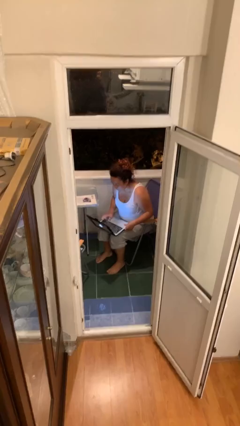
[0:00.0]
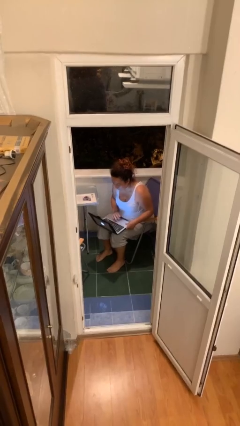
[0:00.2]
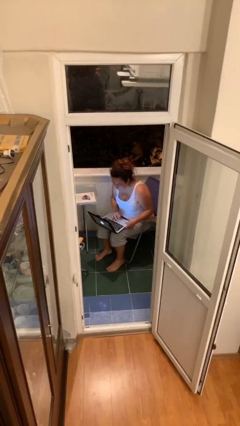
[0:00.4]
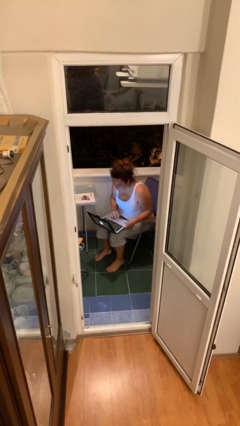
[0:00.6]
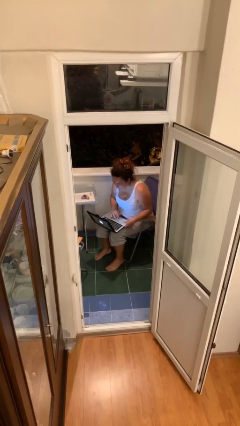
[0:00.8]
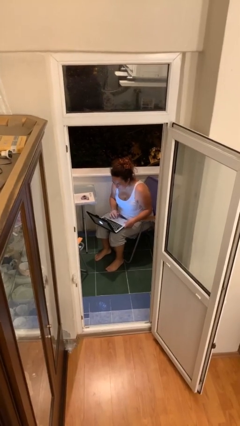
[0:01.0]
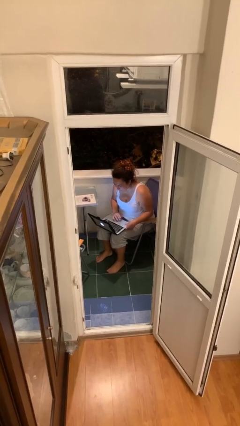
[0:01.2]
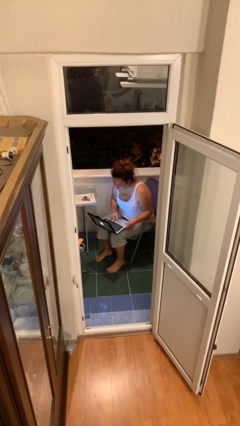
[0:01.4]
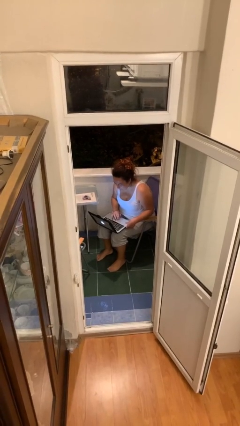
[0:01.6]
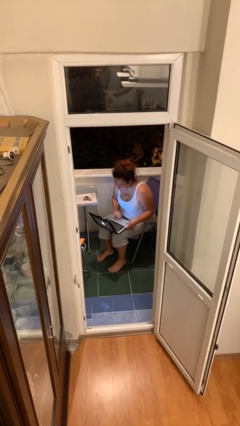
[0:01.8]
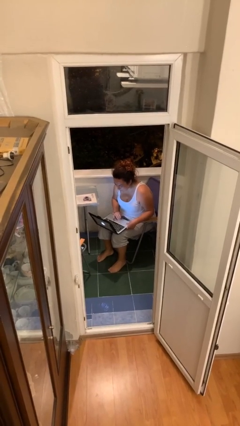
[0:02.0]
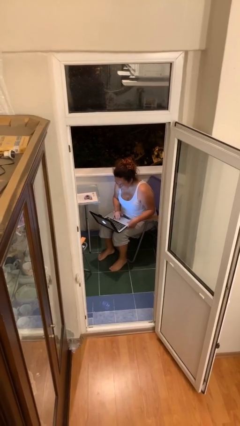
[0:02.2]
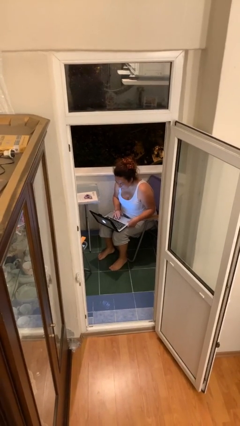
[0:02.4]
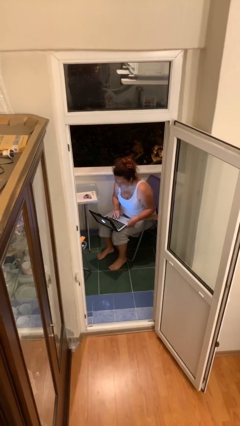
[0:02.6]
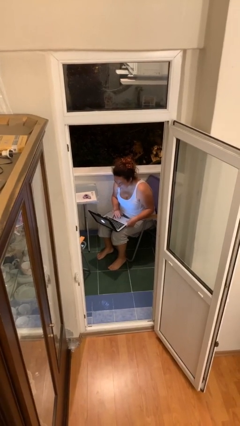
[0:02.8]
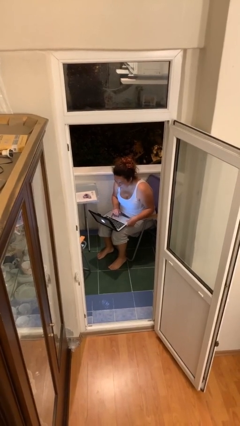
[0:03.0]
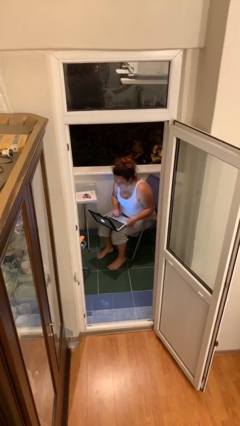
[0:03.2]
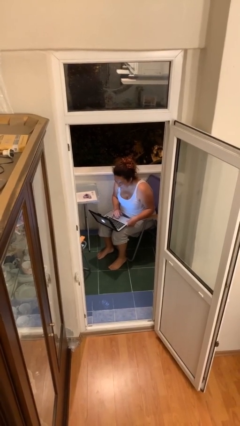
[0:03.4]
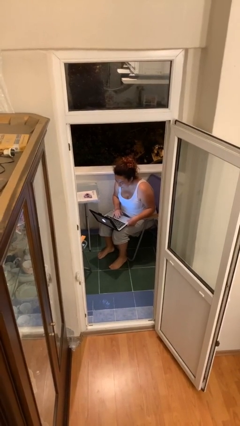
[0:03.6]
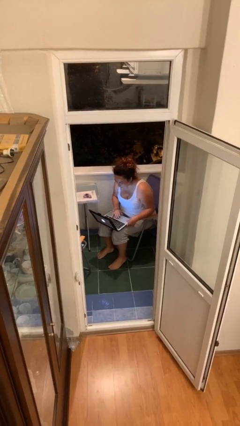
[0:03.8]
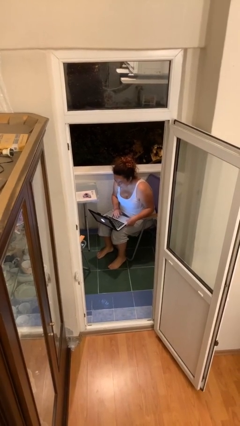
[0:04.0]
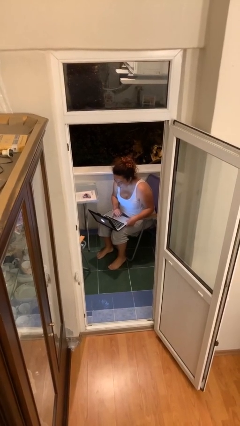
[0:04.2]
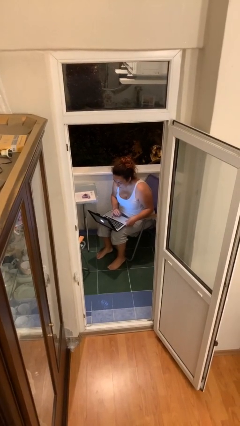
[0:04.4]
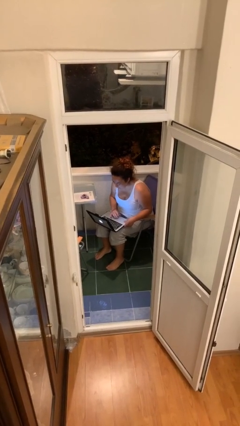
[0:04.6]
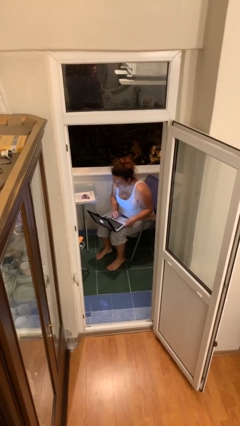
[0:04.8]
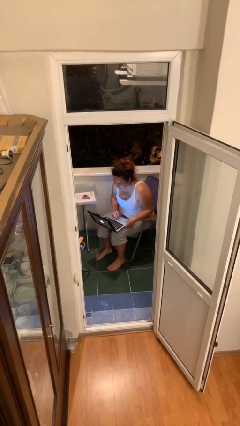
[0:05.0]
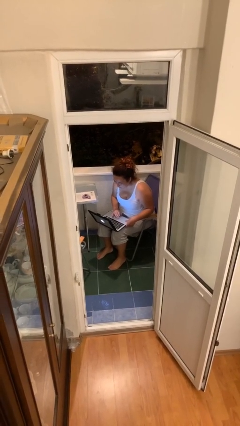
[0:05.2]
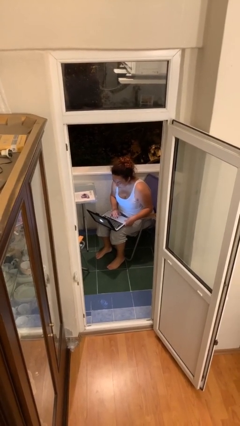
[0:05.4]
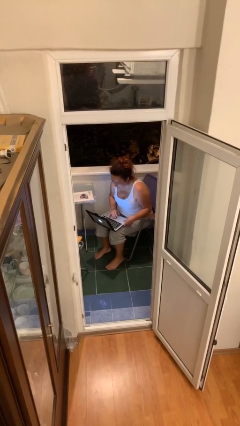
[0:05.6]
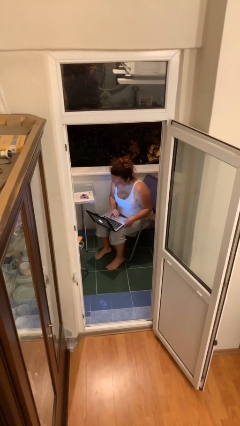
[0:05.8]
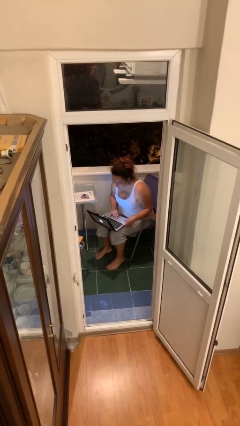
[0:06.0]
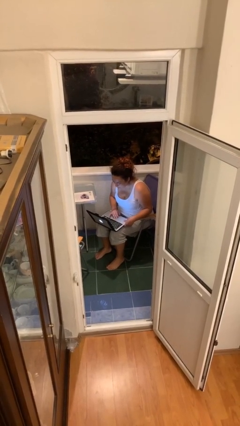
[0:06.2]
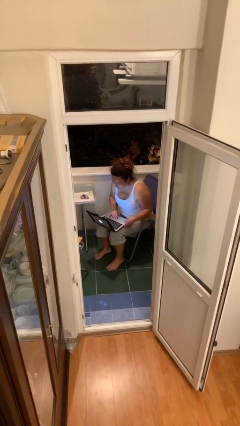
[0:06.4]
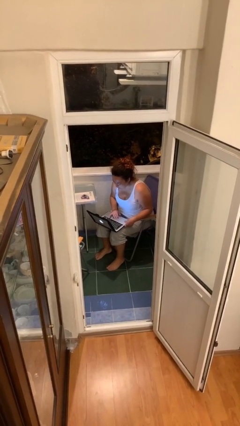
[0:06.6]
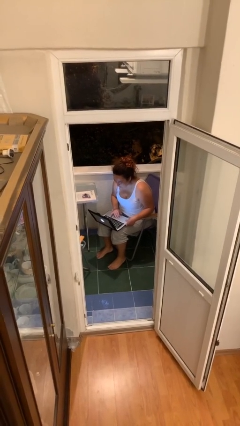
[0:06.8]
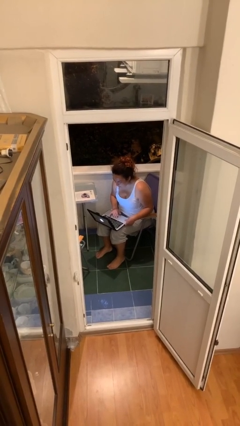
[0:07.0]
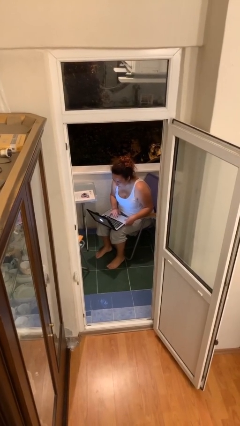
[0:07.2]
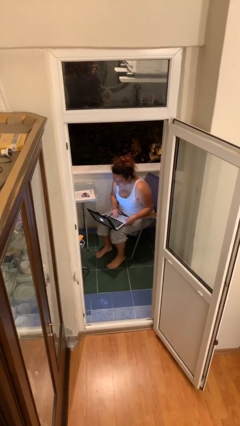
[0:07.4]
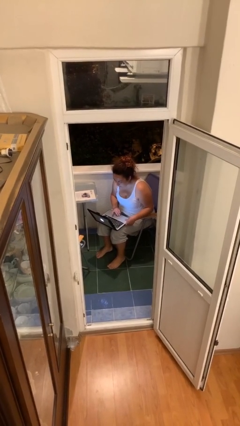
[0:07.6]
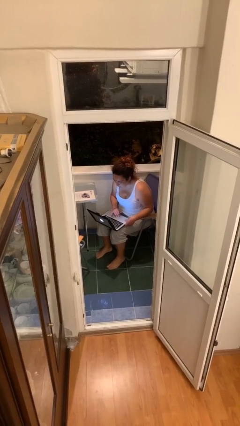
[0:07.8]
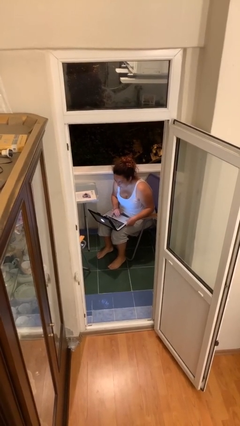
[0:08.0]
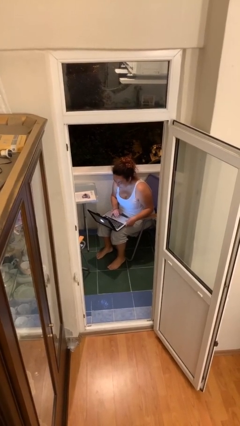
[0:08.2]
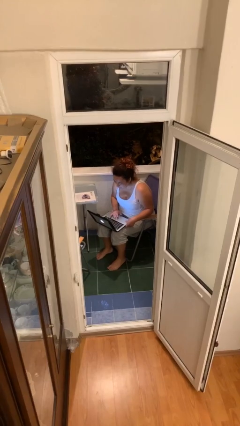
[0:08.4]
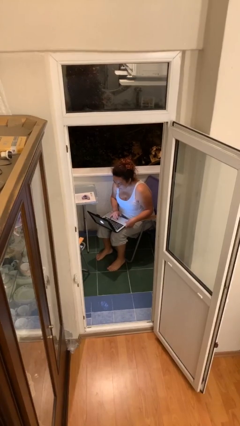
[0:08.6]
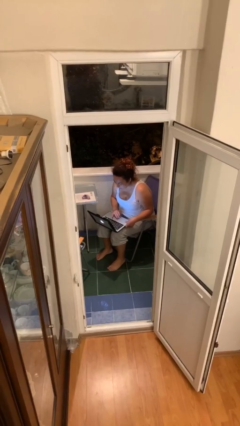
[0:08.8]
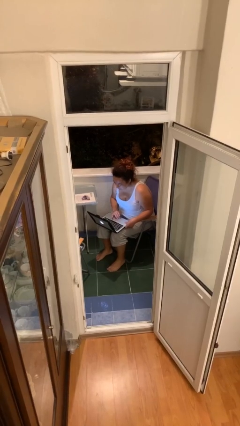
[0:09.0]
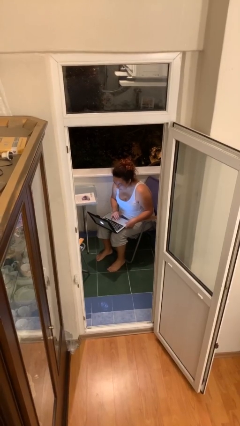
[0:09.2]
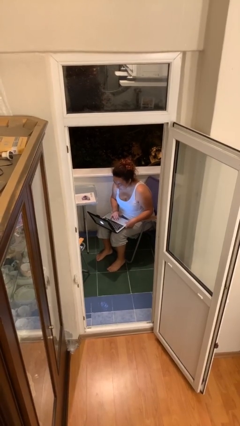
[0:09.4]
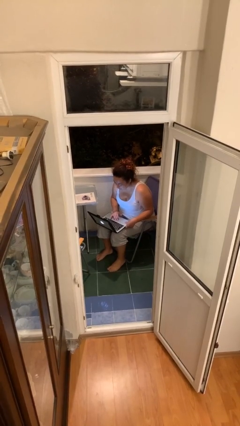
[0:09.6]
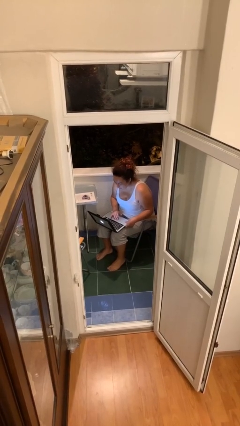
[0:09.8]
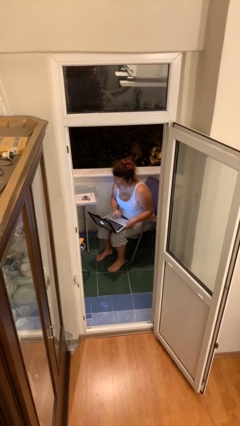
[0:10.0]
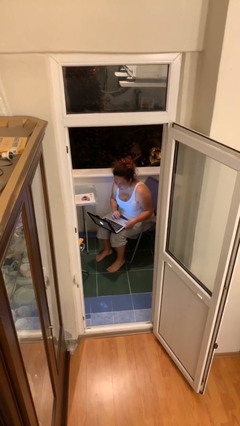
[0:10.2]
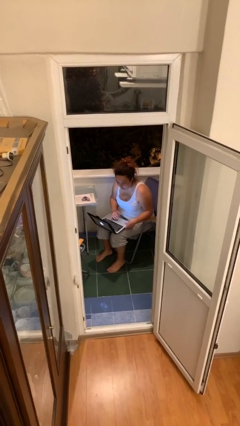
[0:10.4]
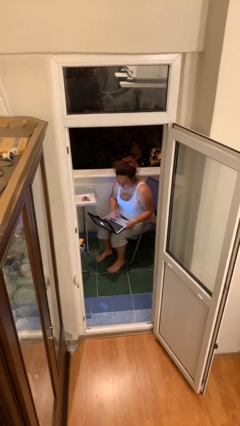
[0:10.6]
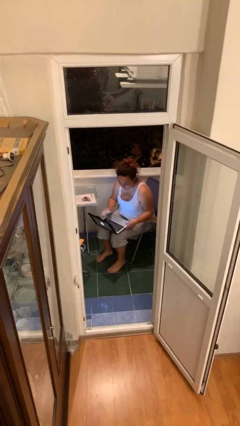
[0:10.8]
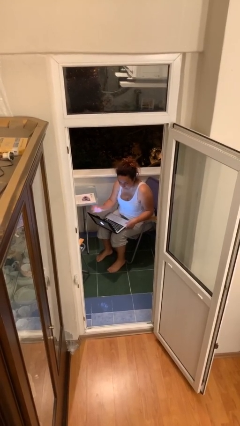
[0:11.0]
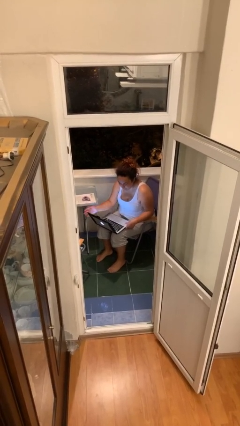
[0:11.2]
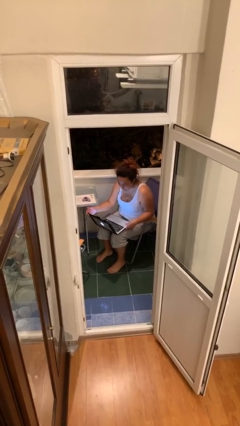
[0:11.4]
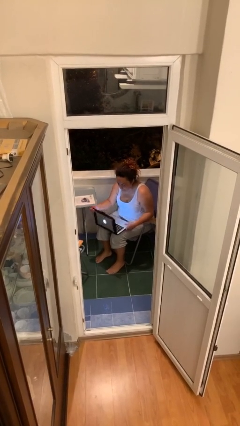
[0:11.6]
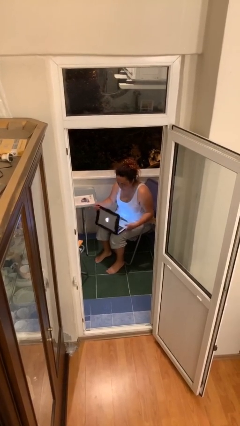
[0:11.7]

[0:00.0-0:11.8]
person interacts with laptop

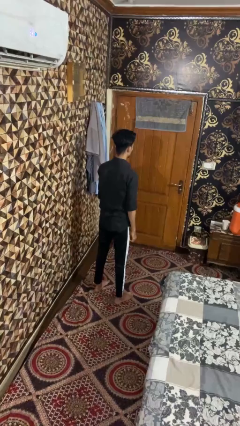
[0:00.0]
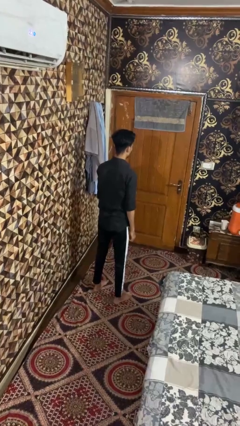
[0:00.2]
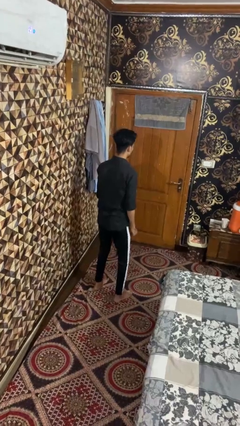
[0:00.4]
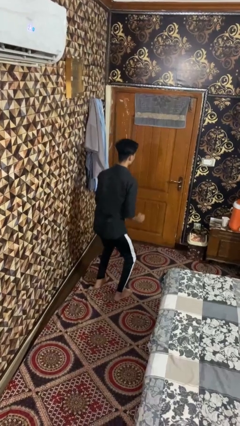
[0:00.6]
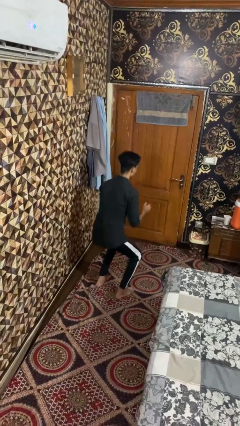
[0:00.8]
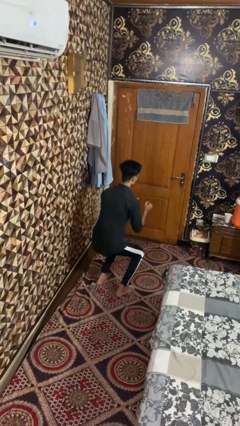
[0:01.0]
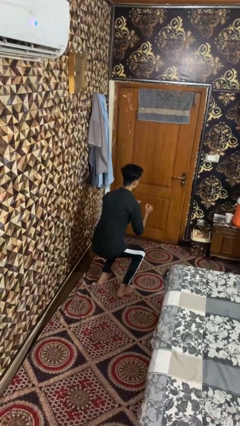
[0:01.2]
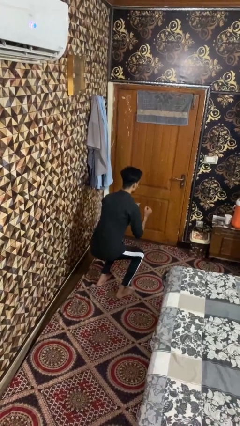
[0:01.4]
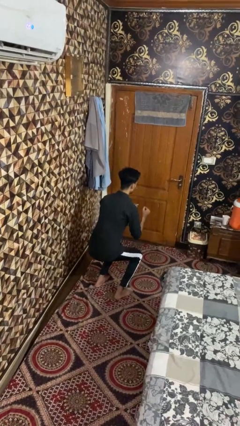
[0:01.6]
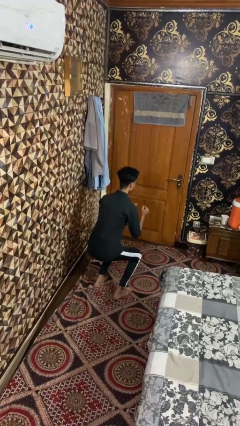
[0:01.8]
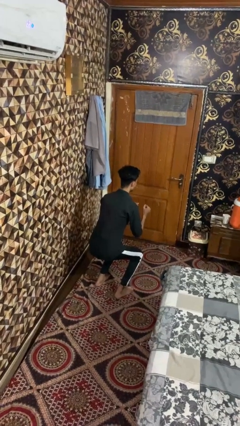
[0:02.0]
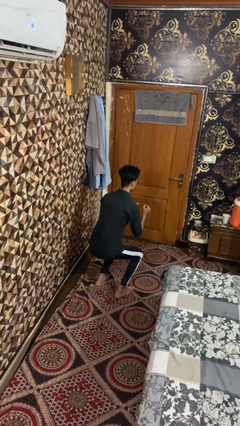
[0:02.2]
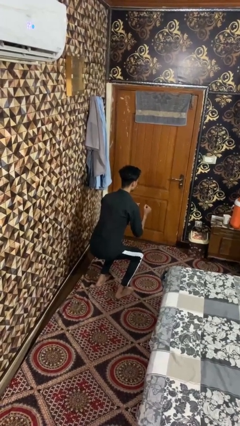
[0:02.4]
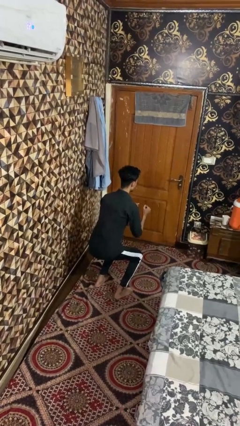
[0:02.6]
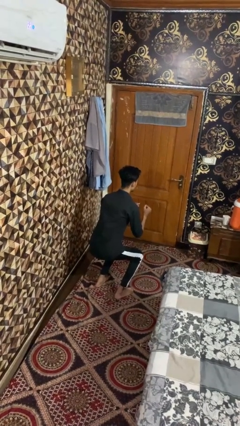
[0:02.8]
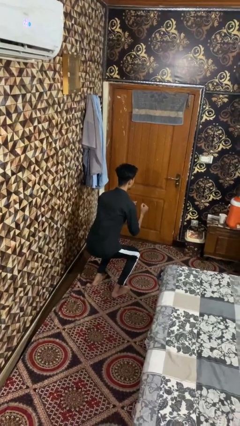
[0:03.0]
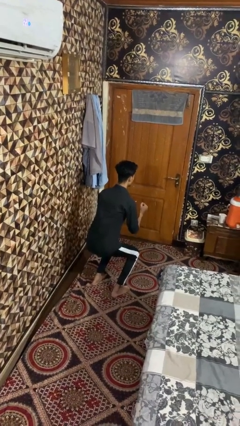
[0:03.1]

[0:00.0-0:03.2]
person squats

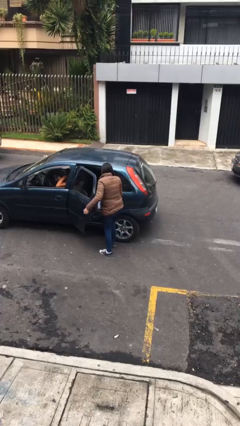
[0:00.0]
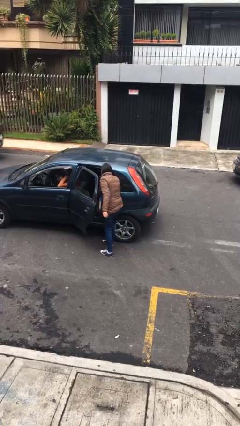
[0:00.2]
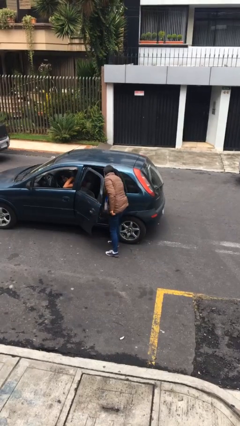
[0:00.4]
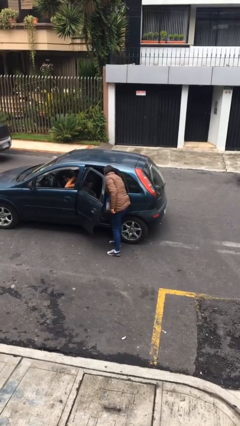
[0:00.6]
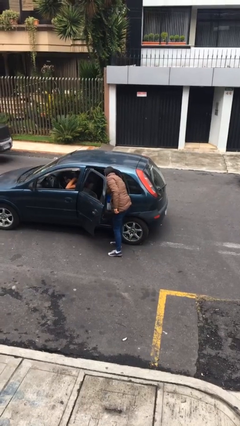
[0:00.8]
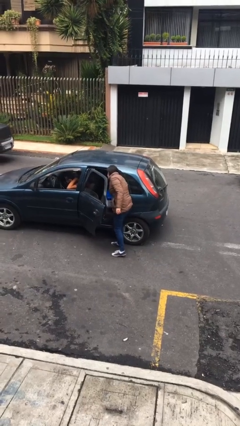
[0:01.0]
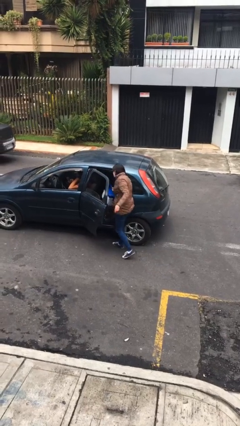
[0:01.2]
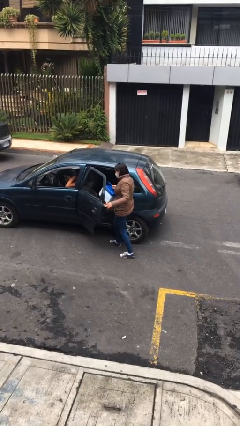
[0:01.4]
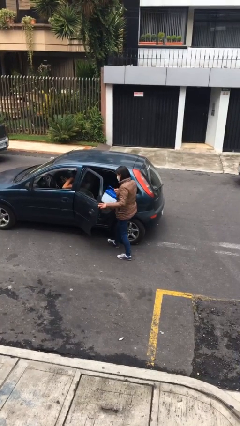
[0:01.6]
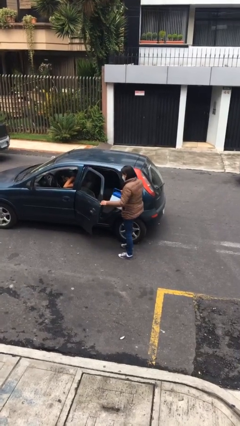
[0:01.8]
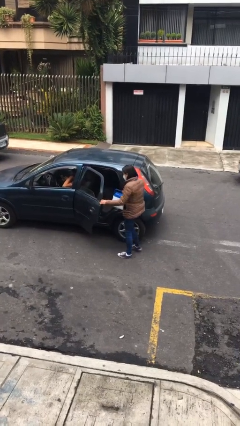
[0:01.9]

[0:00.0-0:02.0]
person unloads car

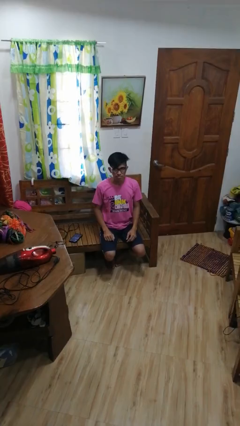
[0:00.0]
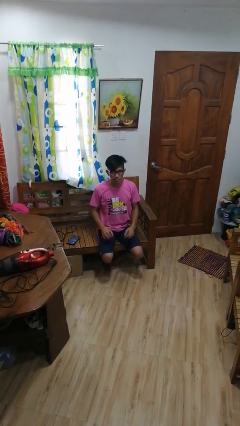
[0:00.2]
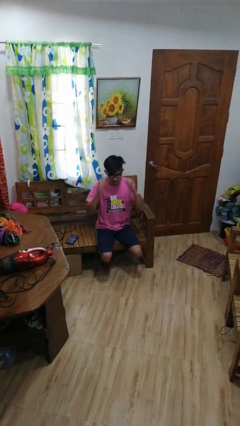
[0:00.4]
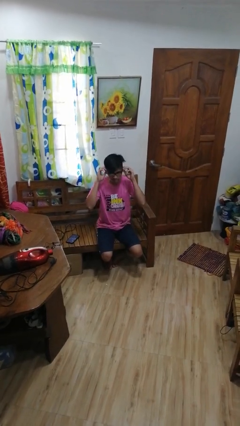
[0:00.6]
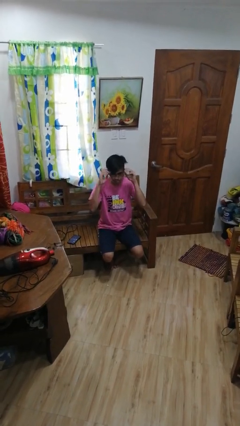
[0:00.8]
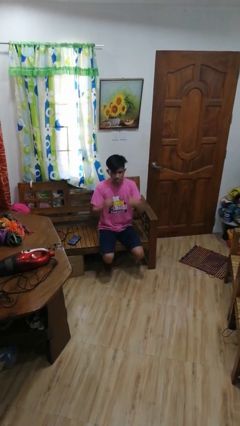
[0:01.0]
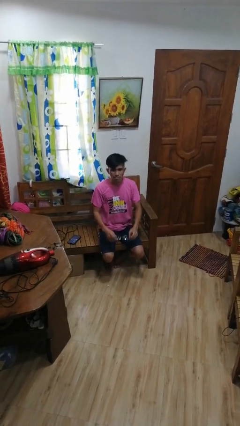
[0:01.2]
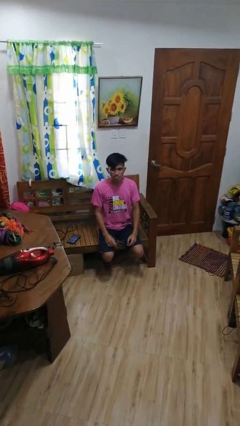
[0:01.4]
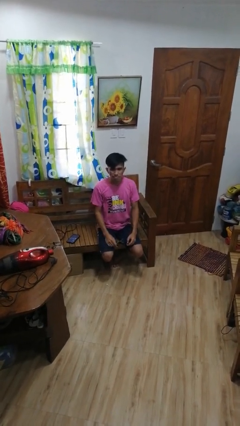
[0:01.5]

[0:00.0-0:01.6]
person takes off glasses
